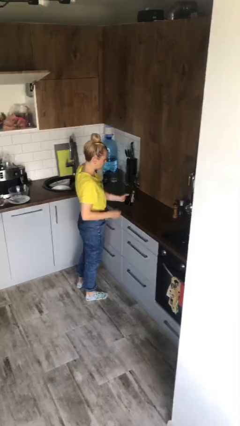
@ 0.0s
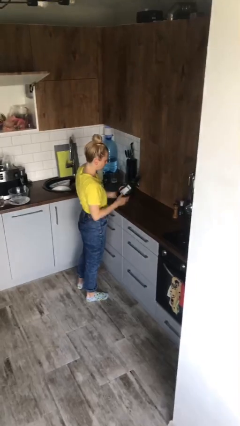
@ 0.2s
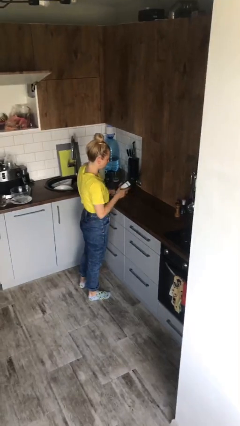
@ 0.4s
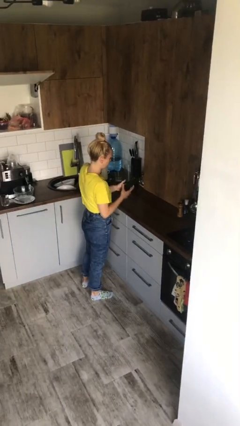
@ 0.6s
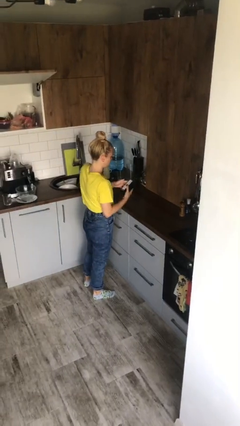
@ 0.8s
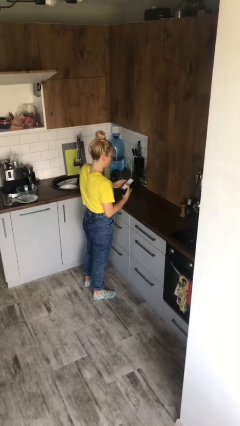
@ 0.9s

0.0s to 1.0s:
person picks up object from table

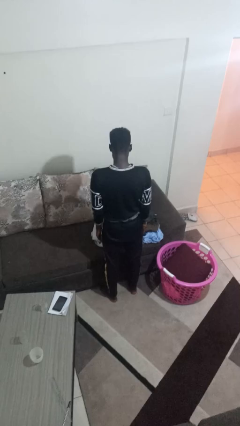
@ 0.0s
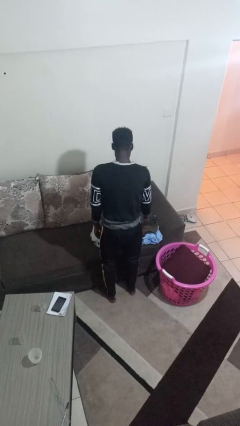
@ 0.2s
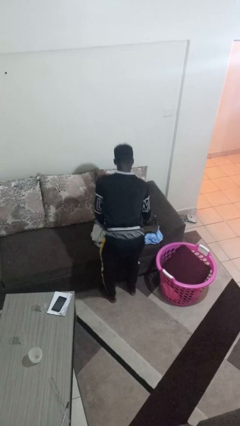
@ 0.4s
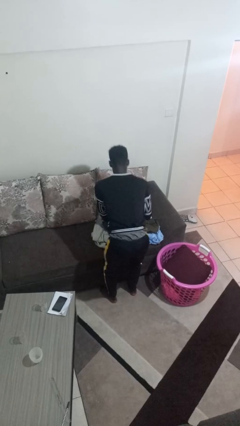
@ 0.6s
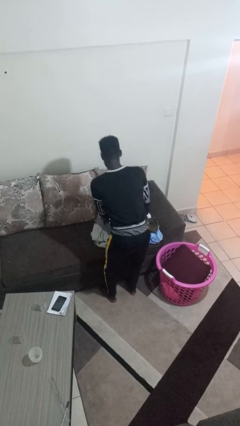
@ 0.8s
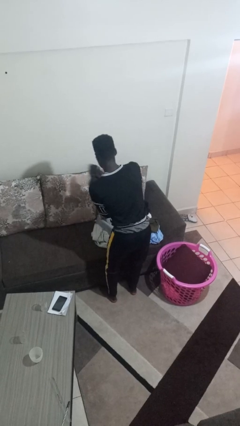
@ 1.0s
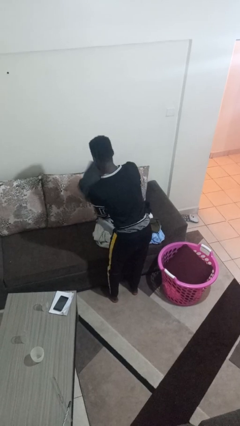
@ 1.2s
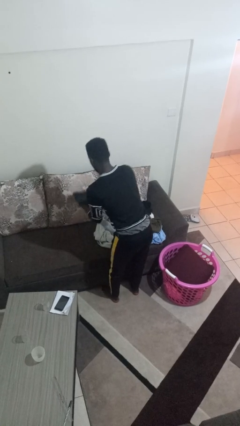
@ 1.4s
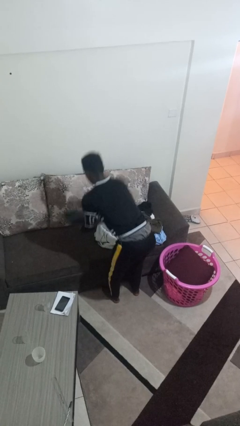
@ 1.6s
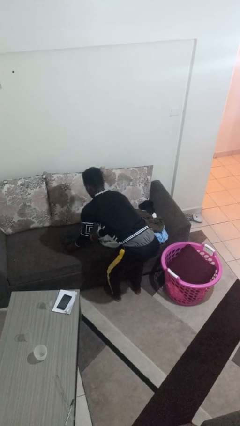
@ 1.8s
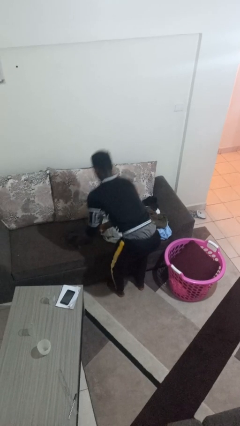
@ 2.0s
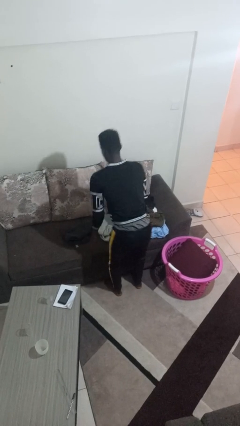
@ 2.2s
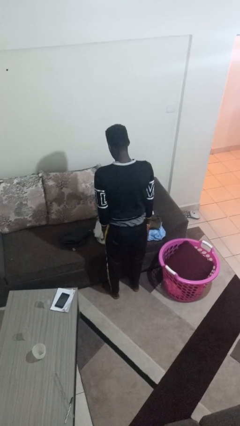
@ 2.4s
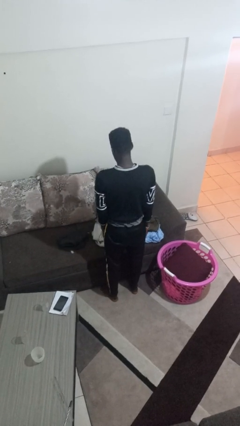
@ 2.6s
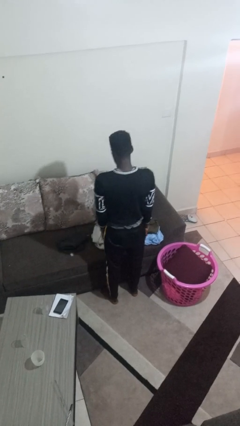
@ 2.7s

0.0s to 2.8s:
person folds pants

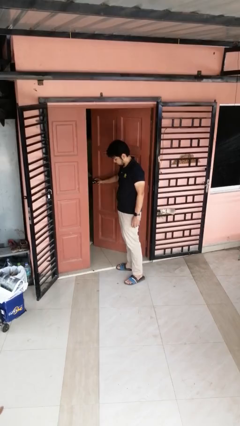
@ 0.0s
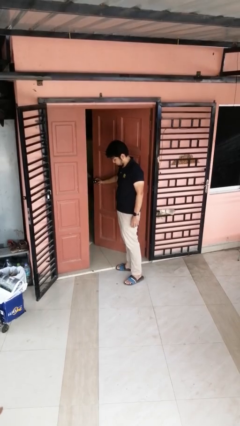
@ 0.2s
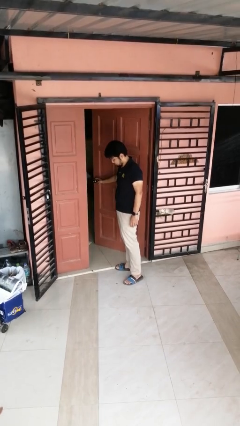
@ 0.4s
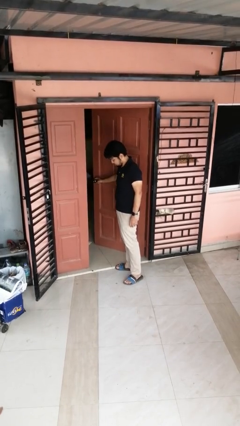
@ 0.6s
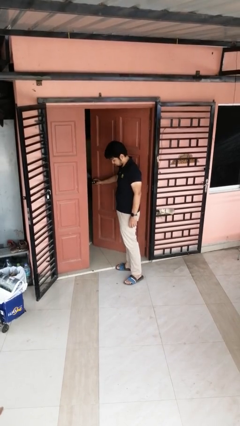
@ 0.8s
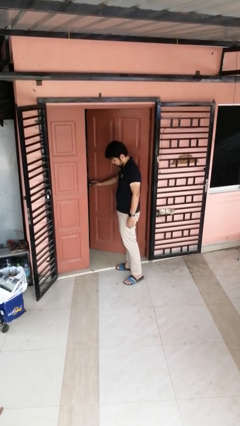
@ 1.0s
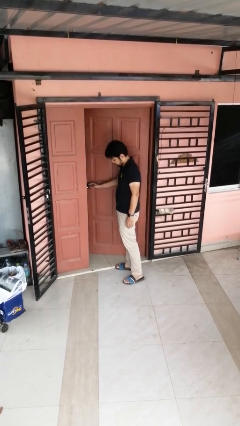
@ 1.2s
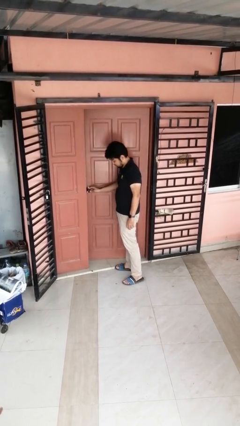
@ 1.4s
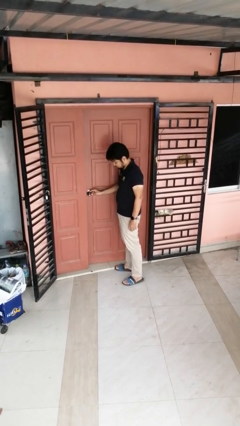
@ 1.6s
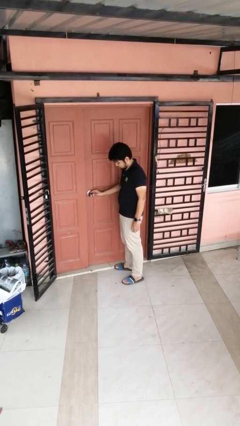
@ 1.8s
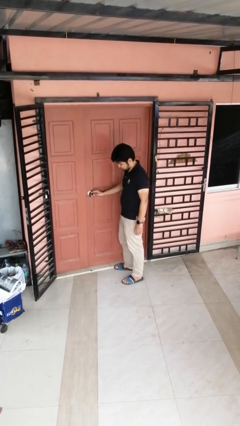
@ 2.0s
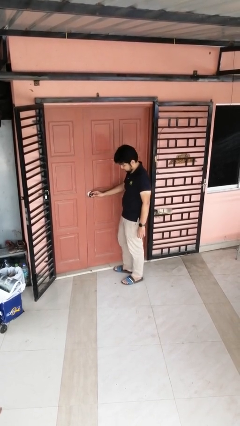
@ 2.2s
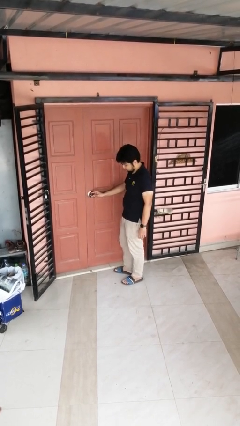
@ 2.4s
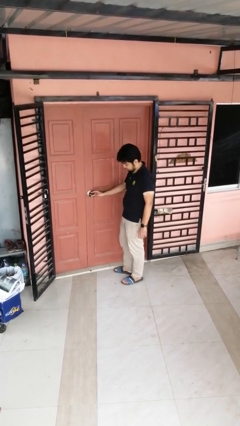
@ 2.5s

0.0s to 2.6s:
person closes door with foot

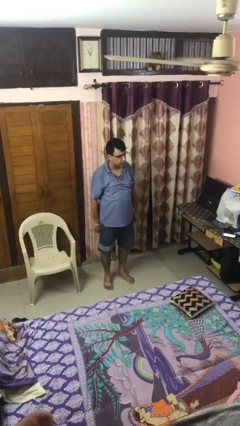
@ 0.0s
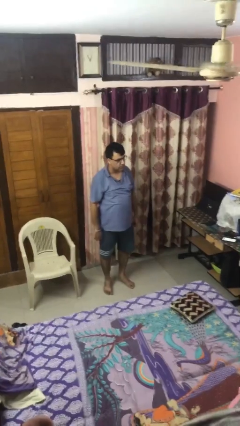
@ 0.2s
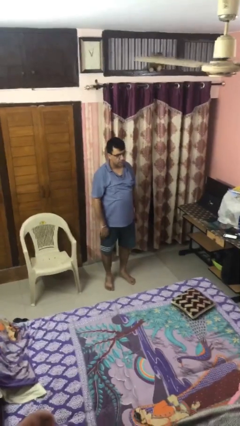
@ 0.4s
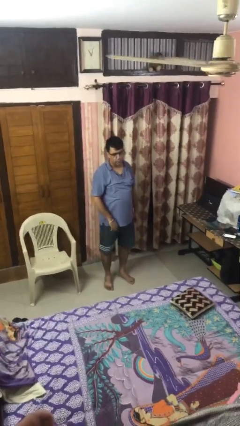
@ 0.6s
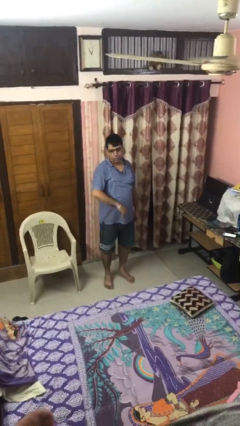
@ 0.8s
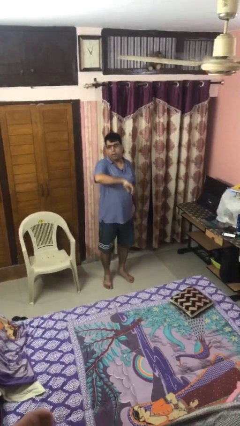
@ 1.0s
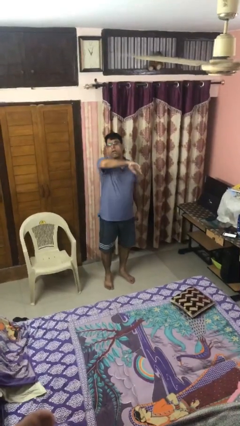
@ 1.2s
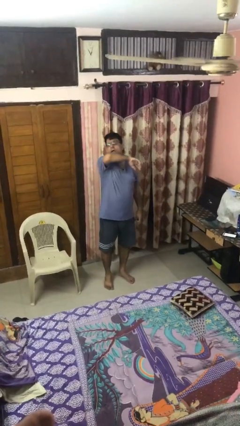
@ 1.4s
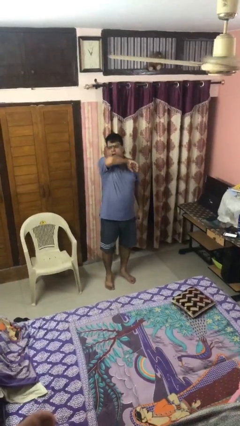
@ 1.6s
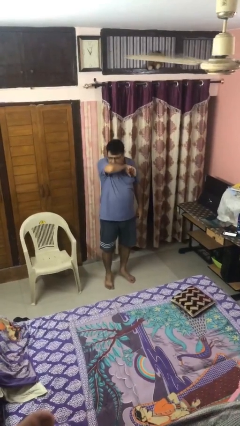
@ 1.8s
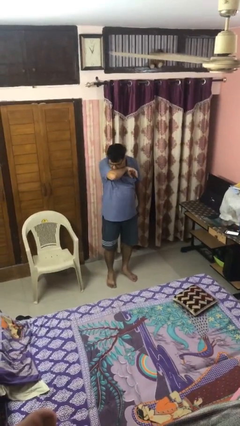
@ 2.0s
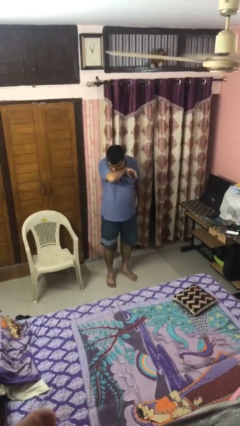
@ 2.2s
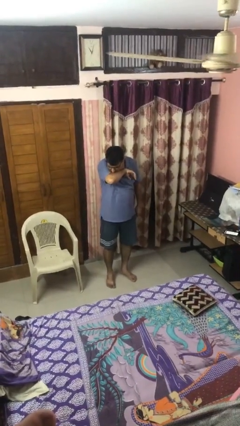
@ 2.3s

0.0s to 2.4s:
person sneezes into arm

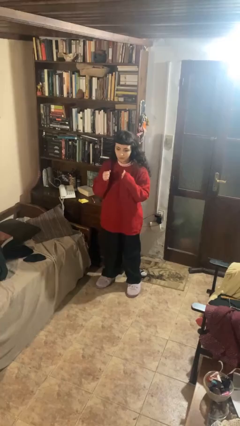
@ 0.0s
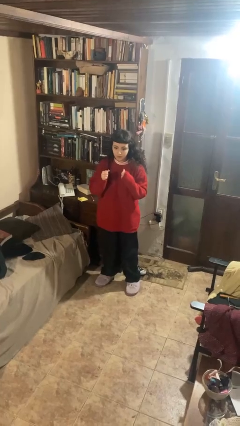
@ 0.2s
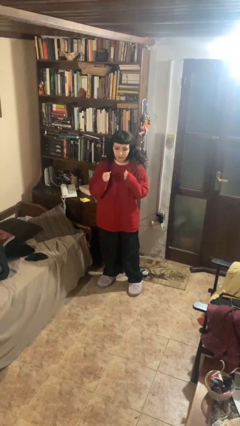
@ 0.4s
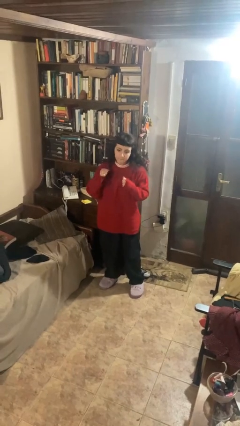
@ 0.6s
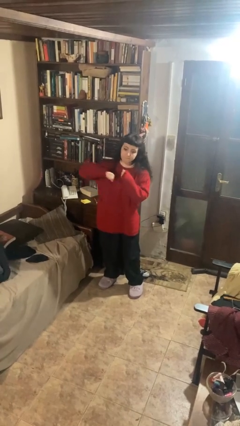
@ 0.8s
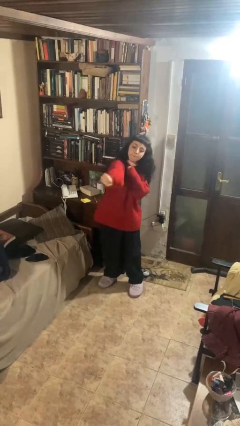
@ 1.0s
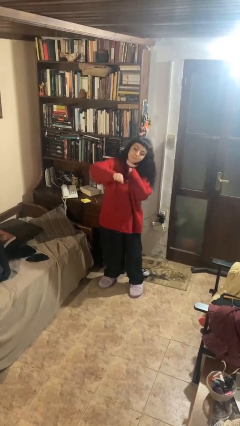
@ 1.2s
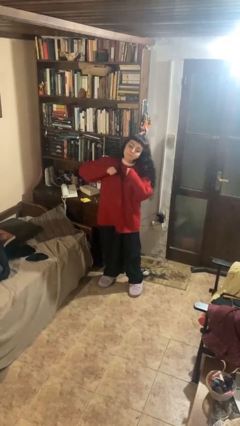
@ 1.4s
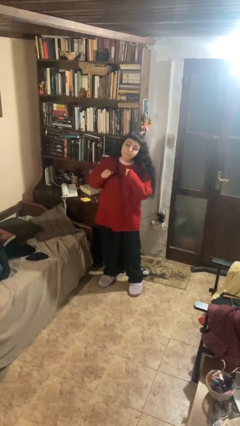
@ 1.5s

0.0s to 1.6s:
person punches

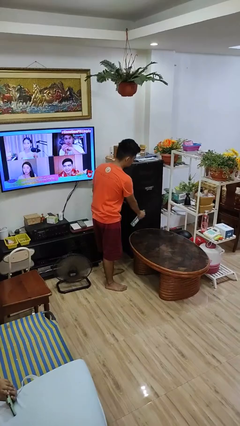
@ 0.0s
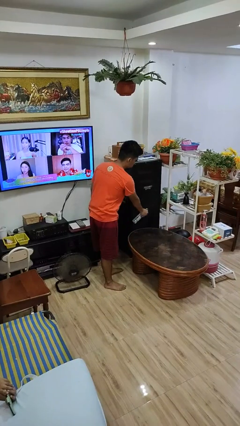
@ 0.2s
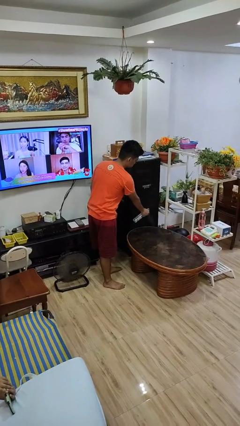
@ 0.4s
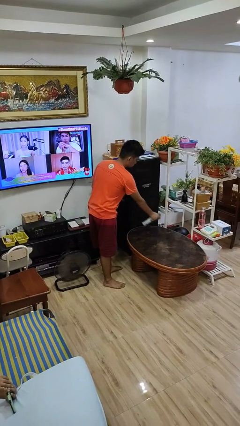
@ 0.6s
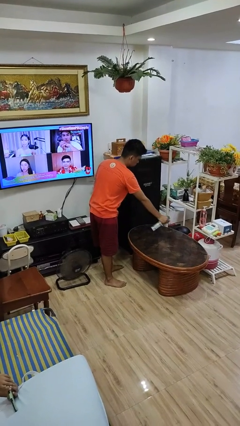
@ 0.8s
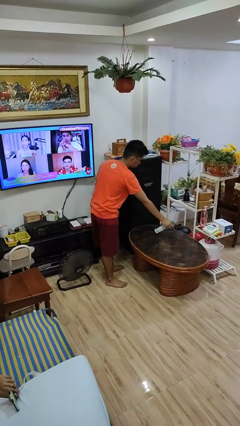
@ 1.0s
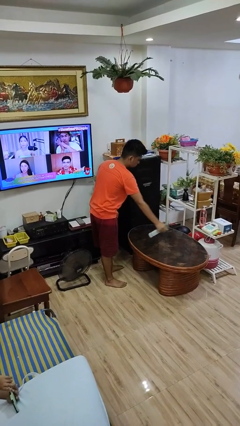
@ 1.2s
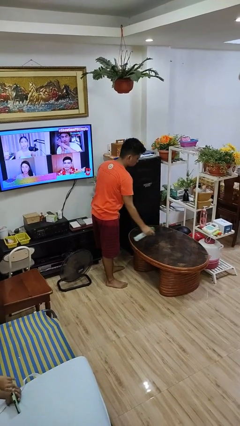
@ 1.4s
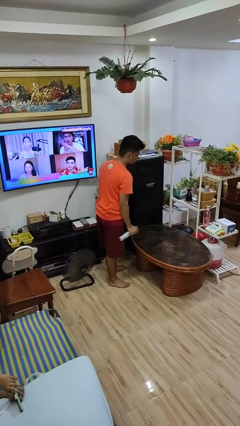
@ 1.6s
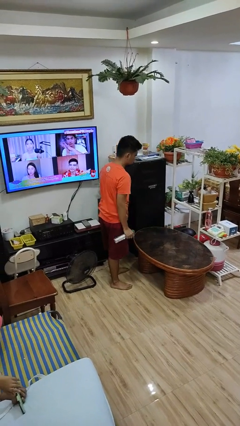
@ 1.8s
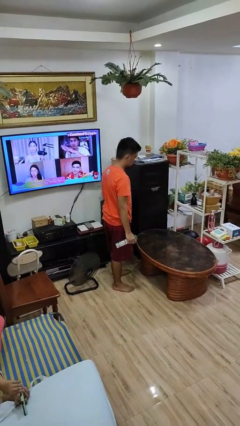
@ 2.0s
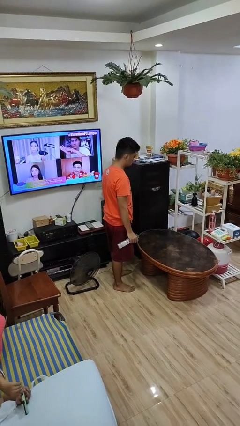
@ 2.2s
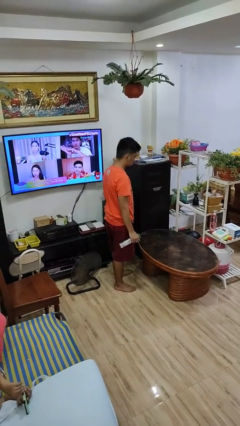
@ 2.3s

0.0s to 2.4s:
person sprays from bottle

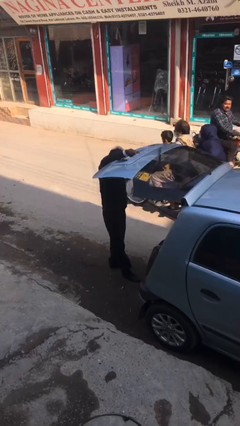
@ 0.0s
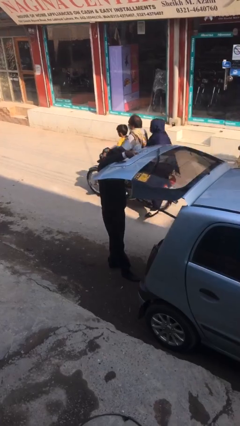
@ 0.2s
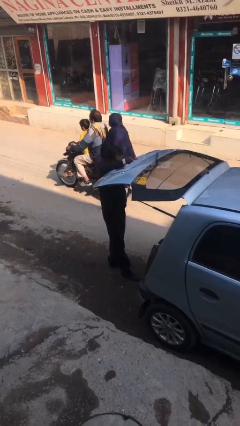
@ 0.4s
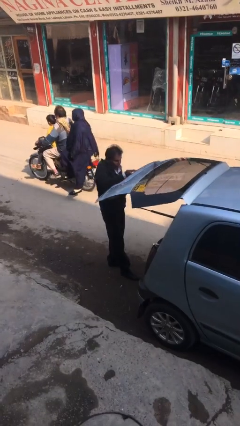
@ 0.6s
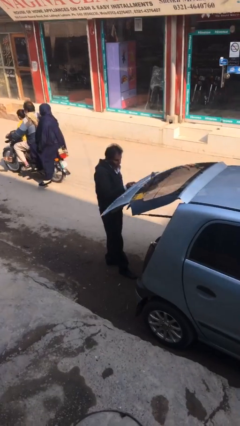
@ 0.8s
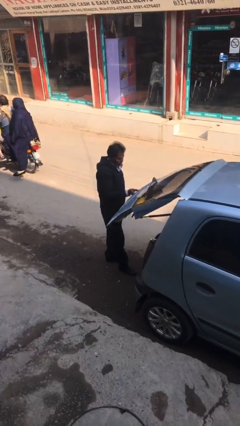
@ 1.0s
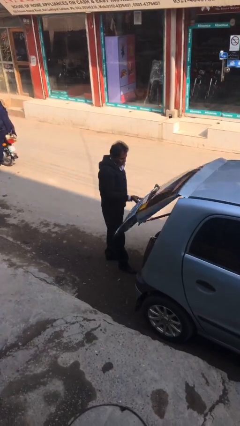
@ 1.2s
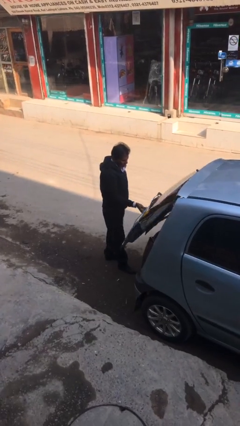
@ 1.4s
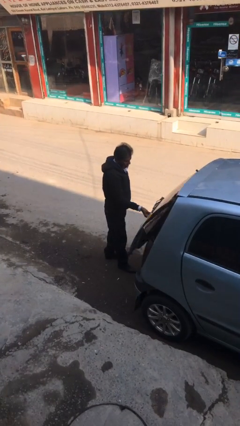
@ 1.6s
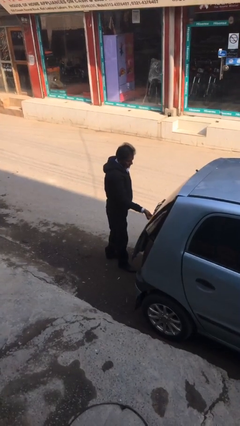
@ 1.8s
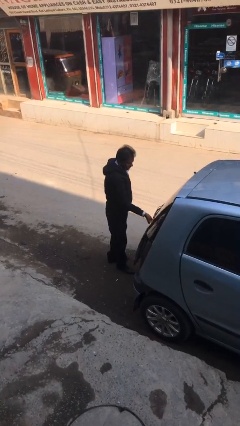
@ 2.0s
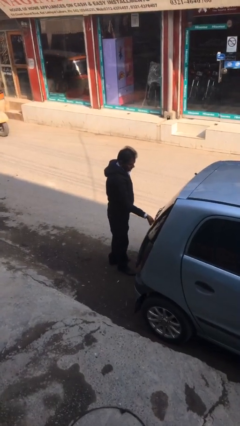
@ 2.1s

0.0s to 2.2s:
person closes car trunk

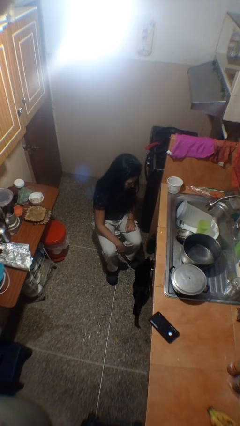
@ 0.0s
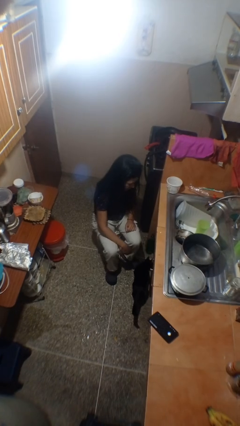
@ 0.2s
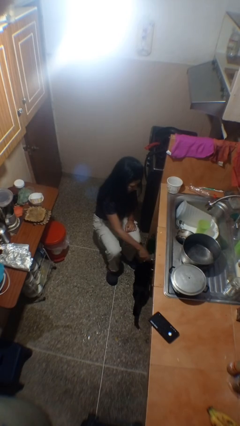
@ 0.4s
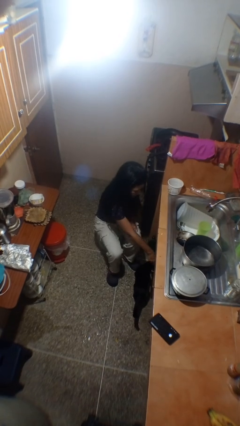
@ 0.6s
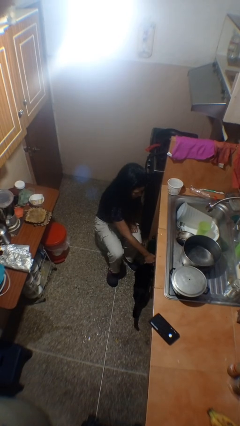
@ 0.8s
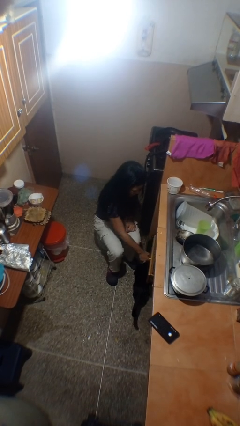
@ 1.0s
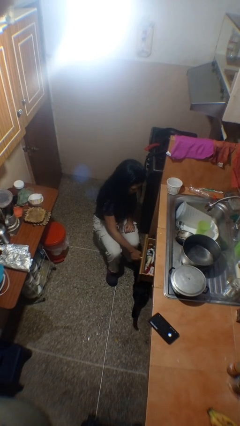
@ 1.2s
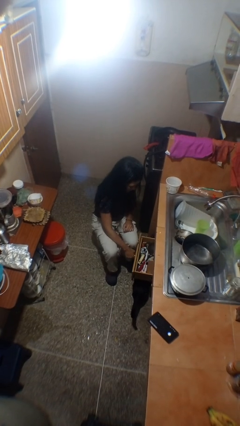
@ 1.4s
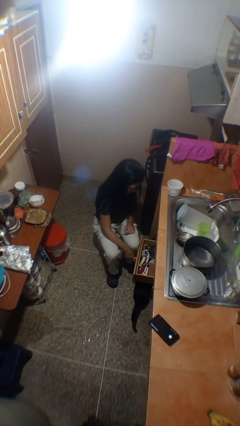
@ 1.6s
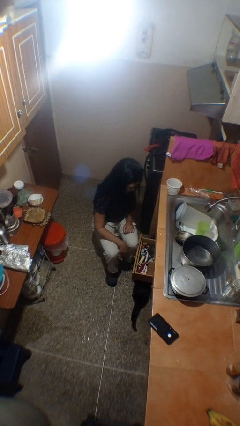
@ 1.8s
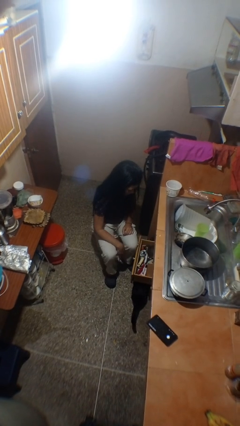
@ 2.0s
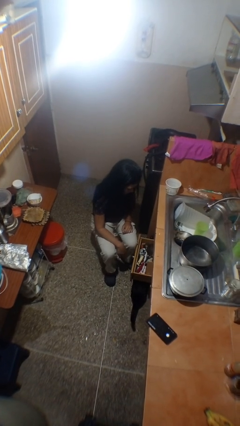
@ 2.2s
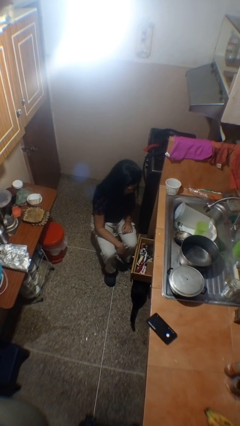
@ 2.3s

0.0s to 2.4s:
person opens kitchen drawer
